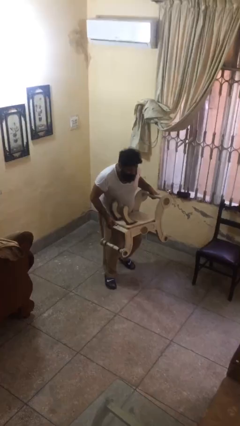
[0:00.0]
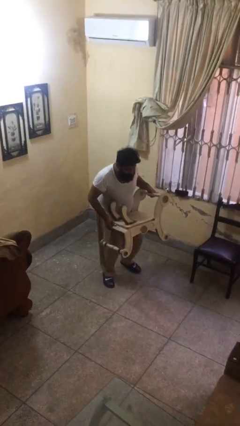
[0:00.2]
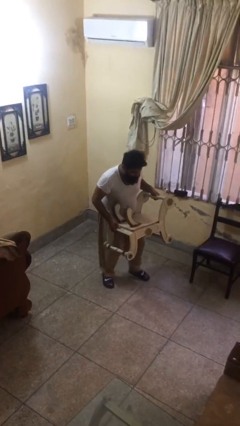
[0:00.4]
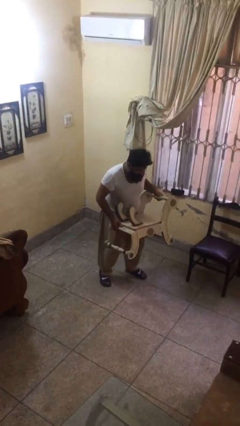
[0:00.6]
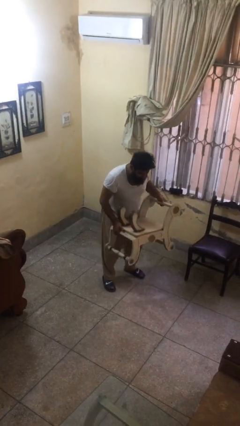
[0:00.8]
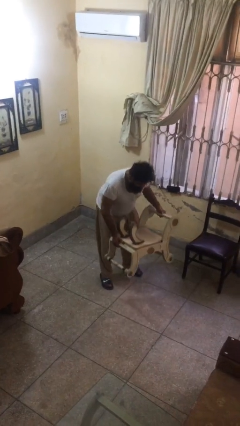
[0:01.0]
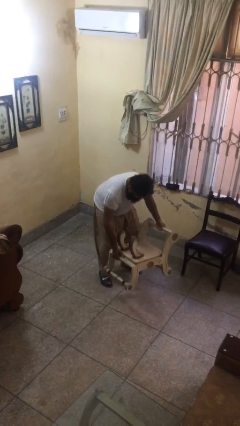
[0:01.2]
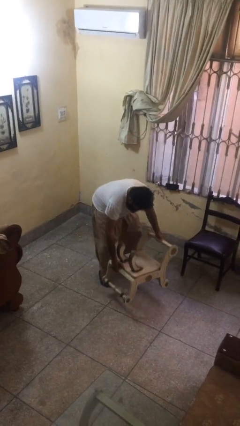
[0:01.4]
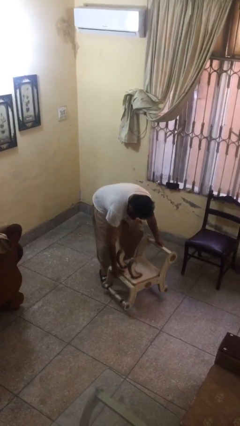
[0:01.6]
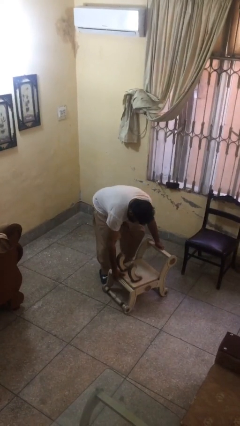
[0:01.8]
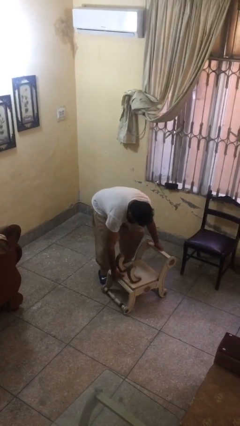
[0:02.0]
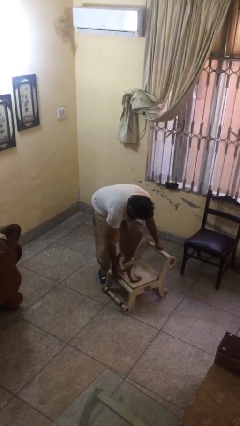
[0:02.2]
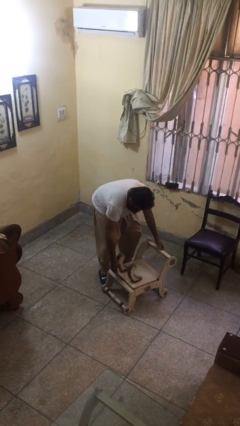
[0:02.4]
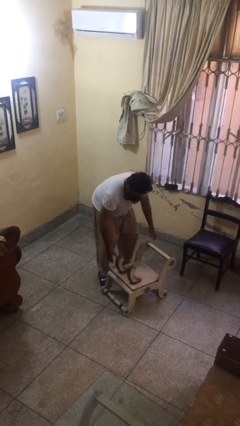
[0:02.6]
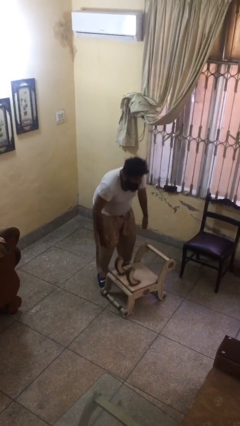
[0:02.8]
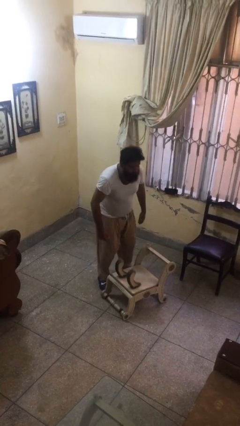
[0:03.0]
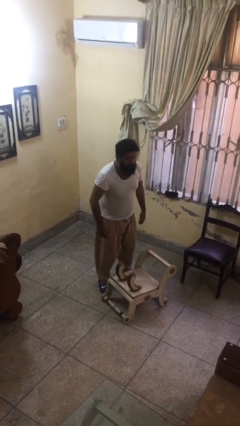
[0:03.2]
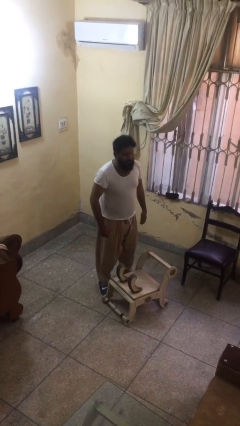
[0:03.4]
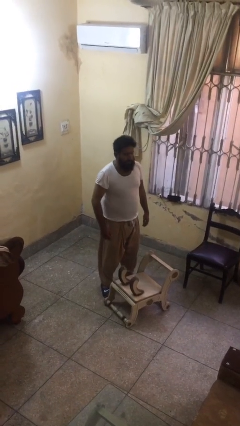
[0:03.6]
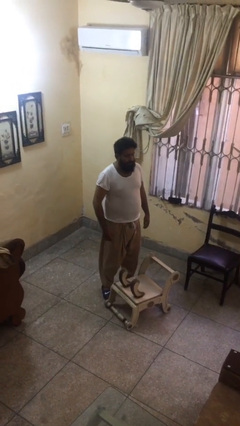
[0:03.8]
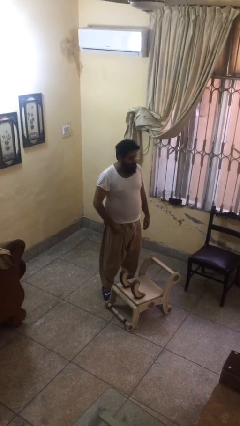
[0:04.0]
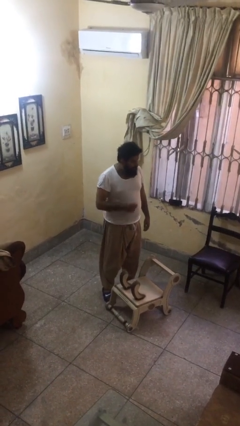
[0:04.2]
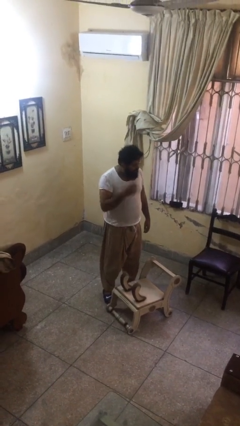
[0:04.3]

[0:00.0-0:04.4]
person puts down object on floor

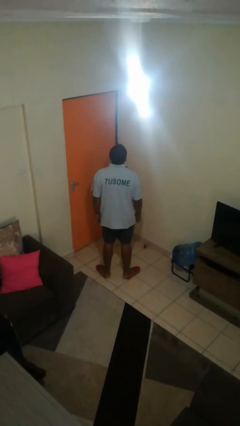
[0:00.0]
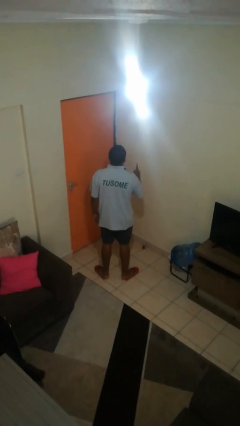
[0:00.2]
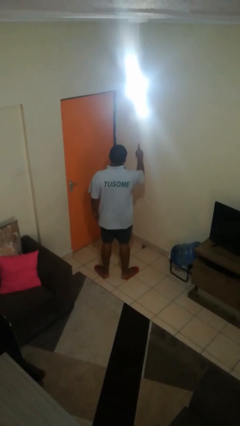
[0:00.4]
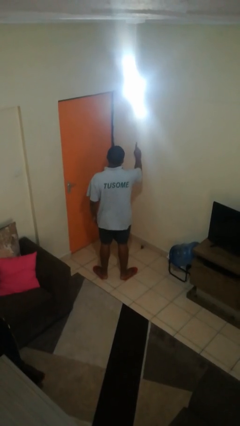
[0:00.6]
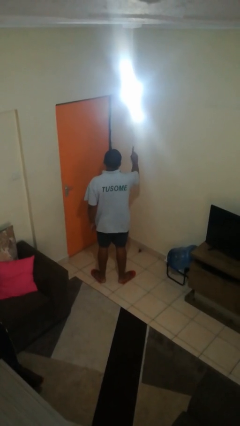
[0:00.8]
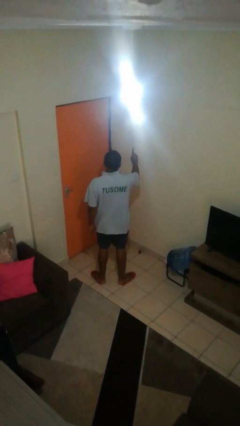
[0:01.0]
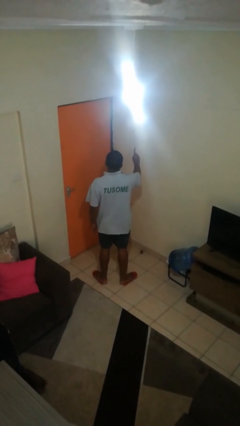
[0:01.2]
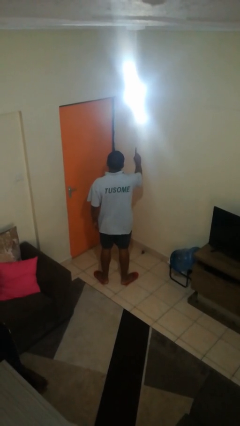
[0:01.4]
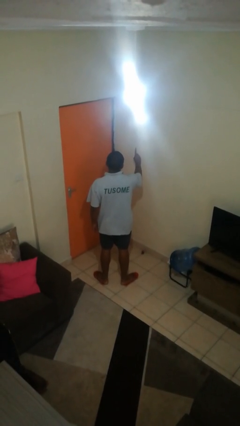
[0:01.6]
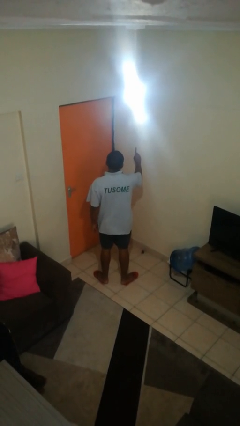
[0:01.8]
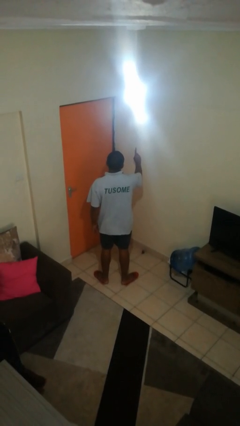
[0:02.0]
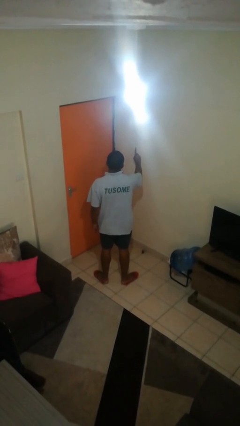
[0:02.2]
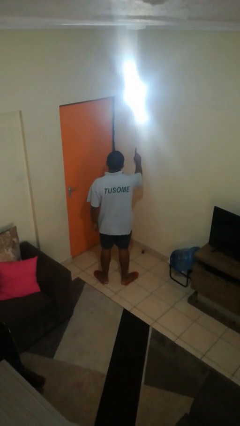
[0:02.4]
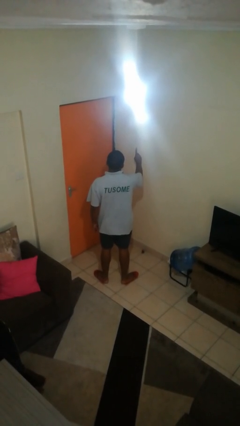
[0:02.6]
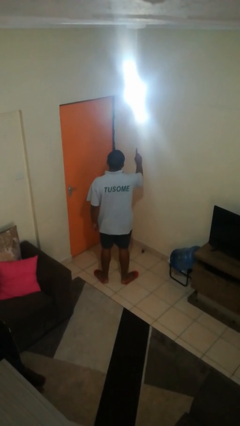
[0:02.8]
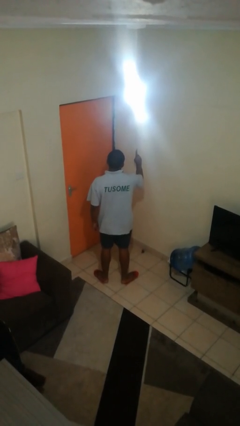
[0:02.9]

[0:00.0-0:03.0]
person gestures number one

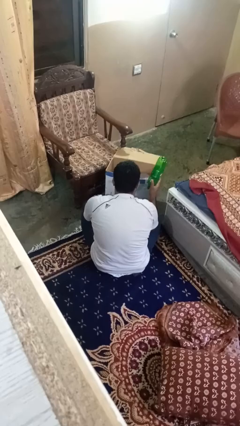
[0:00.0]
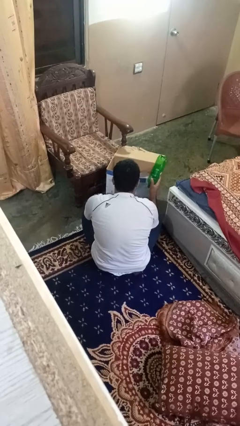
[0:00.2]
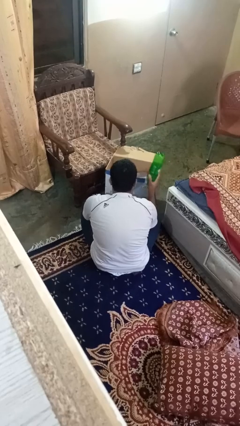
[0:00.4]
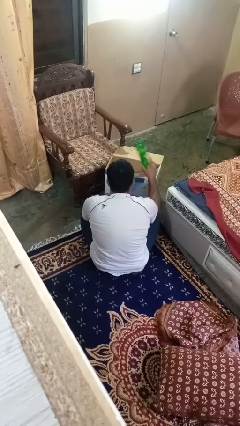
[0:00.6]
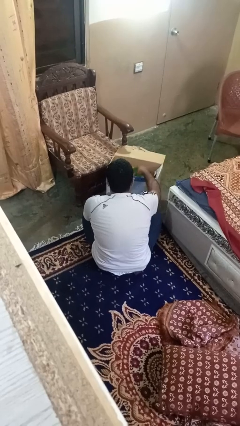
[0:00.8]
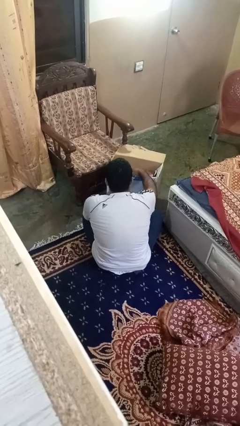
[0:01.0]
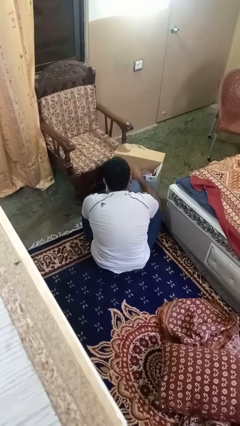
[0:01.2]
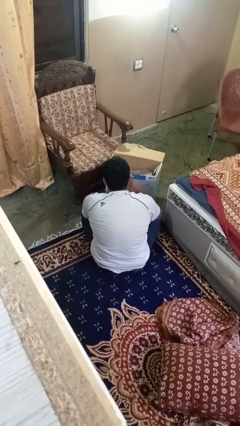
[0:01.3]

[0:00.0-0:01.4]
person puts object into box

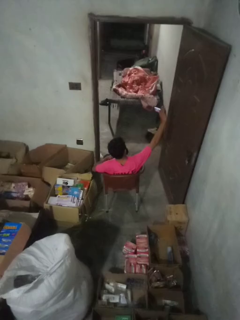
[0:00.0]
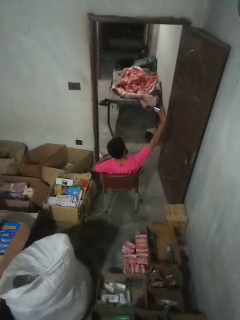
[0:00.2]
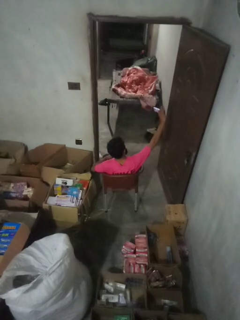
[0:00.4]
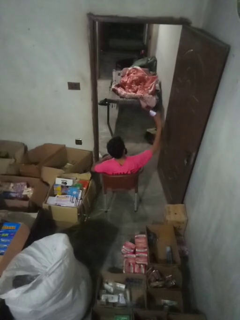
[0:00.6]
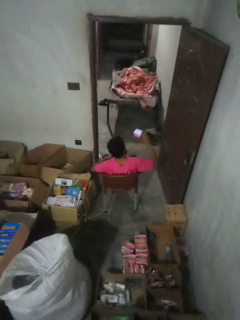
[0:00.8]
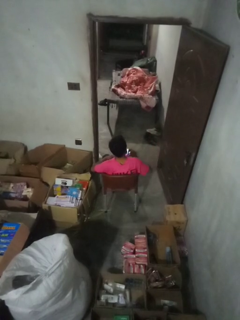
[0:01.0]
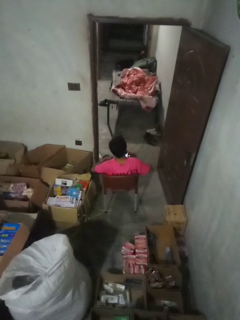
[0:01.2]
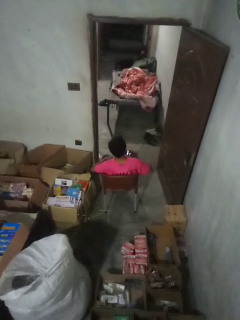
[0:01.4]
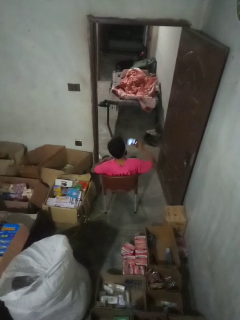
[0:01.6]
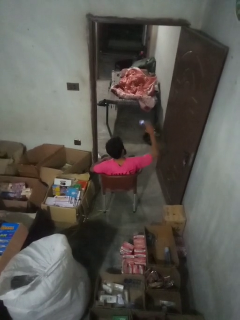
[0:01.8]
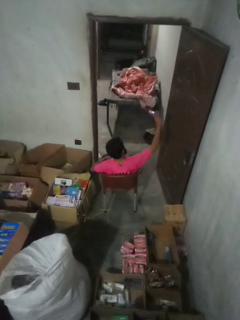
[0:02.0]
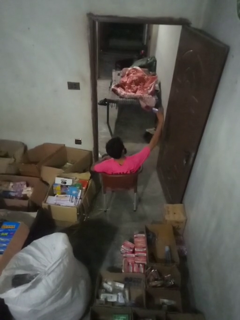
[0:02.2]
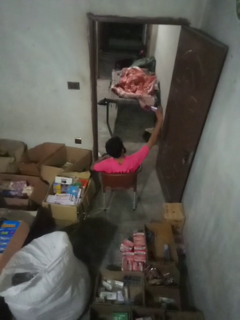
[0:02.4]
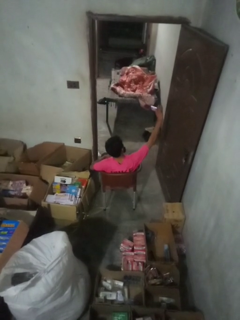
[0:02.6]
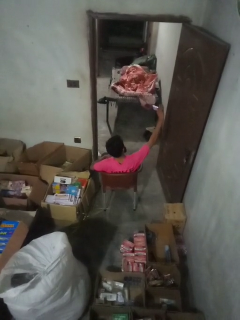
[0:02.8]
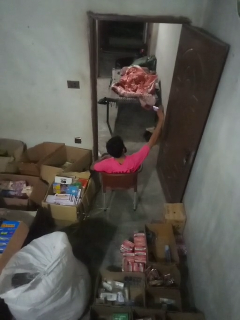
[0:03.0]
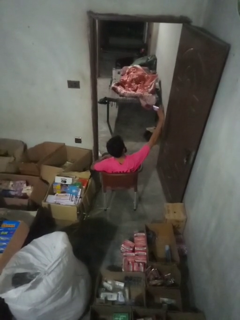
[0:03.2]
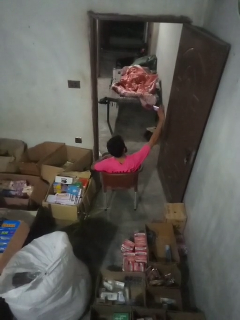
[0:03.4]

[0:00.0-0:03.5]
person takes selfie

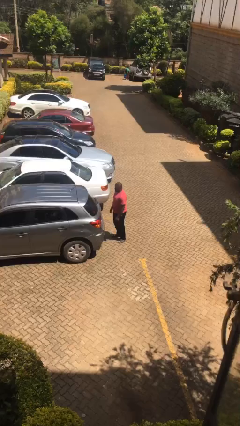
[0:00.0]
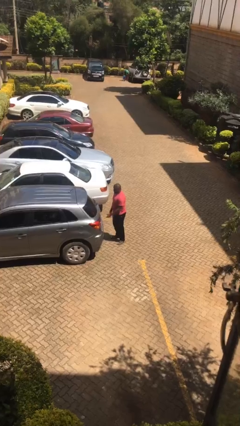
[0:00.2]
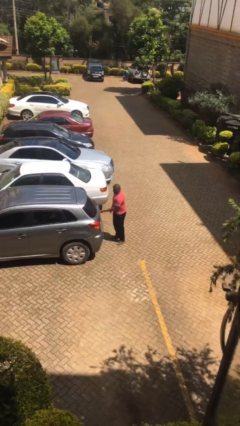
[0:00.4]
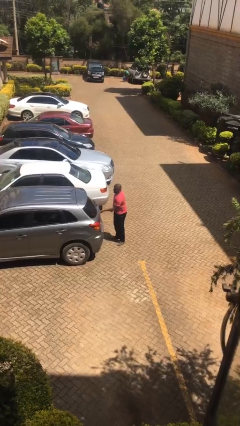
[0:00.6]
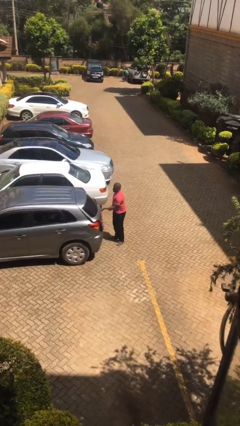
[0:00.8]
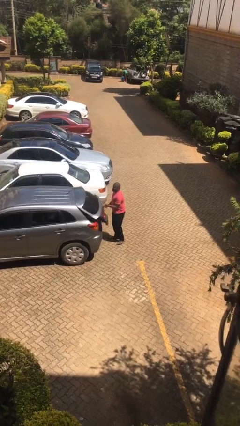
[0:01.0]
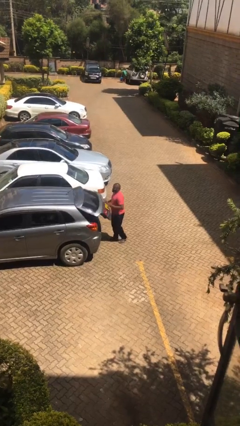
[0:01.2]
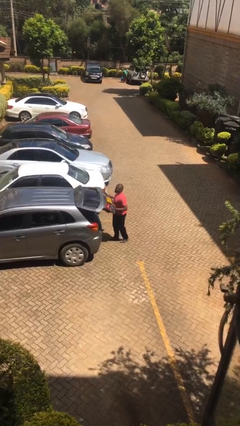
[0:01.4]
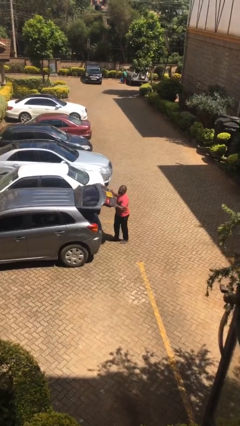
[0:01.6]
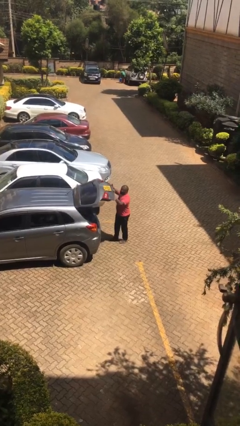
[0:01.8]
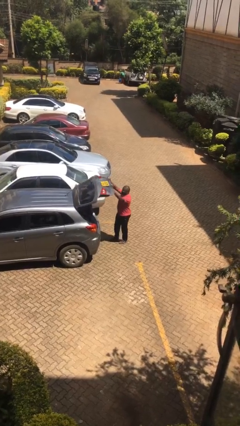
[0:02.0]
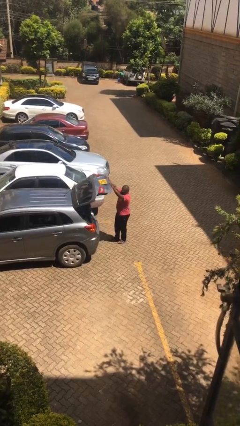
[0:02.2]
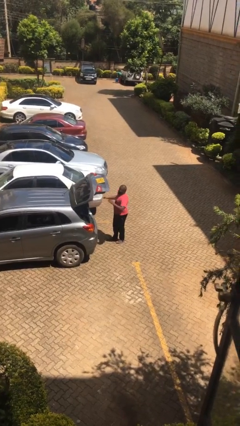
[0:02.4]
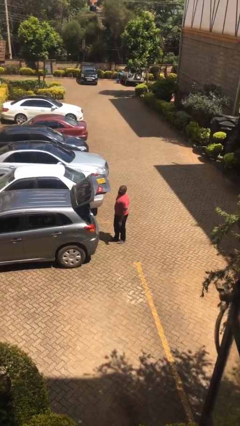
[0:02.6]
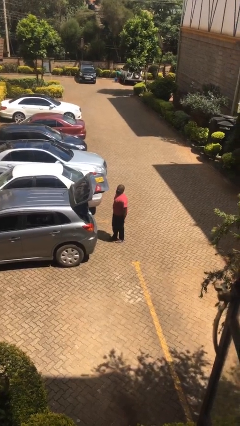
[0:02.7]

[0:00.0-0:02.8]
person opens car trunk

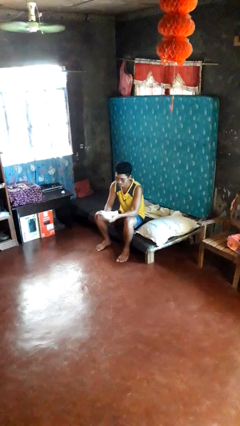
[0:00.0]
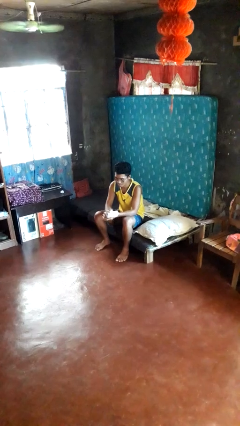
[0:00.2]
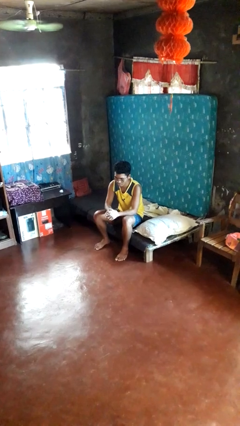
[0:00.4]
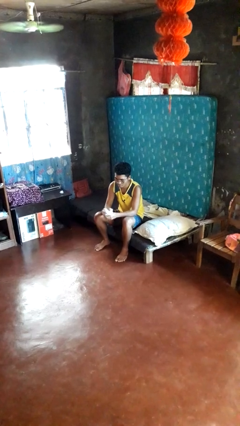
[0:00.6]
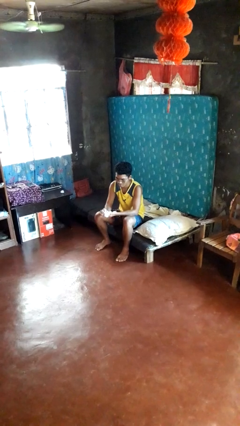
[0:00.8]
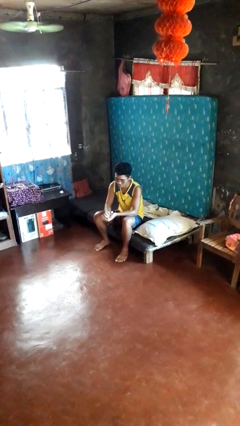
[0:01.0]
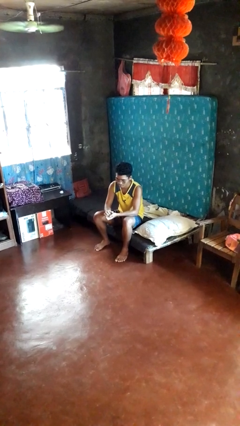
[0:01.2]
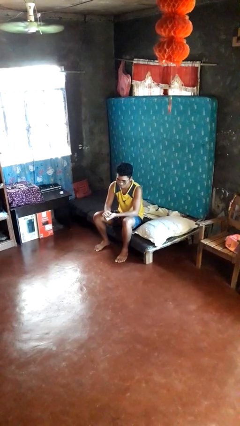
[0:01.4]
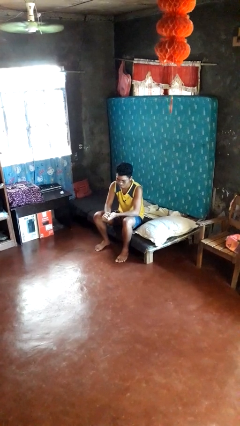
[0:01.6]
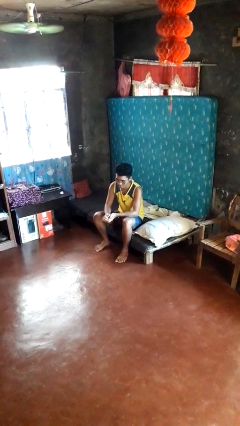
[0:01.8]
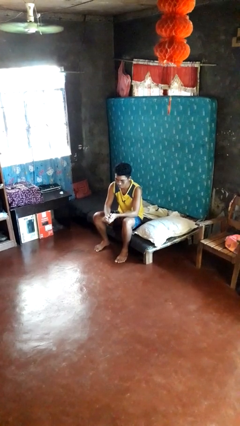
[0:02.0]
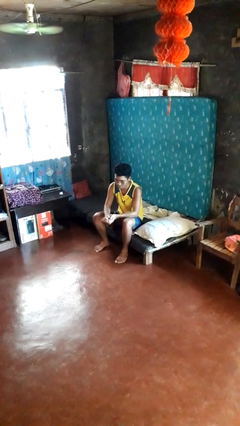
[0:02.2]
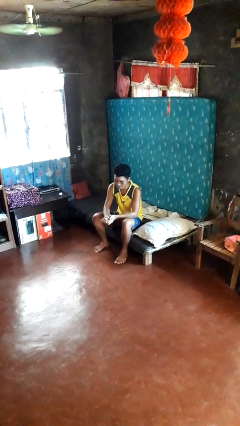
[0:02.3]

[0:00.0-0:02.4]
person crumples paper

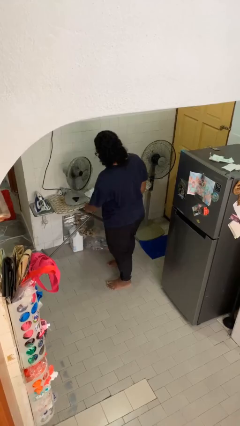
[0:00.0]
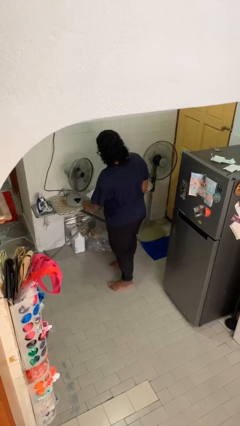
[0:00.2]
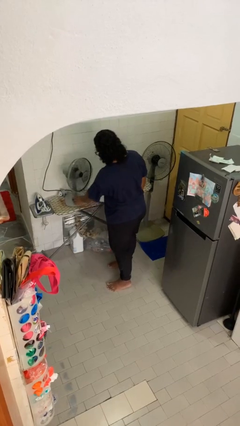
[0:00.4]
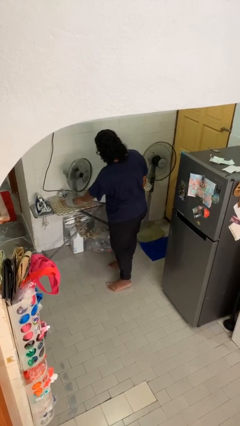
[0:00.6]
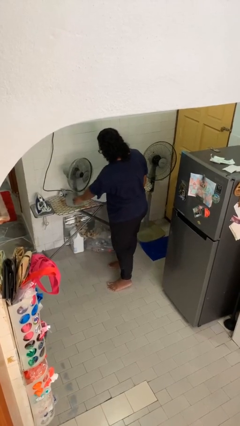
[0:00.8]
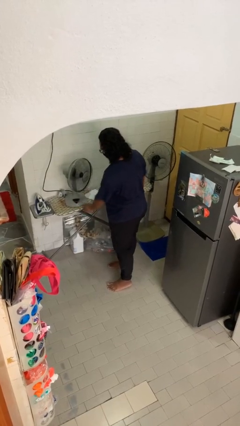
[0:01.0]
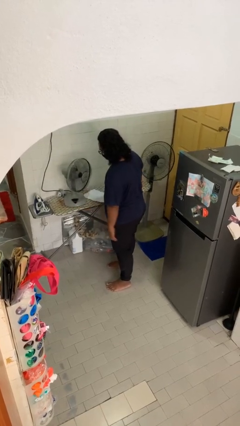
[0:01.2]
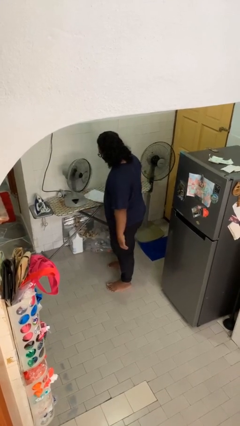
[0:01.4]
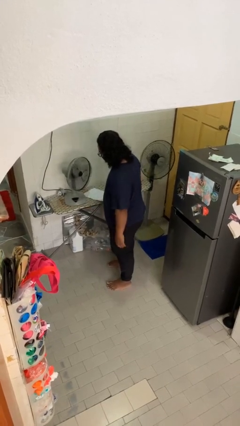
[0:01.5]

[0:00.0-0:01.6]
person turns off fan
